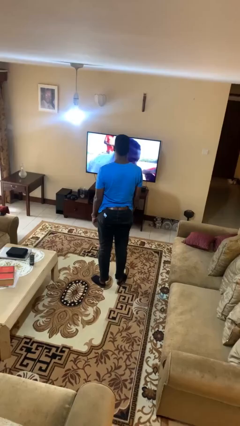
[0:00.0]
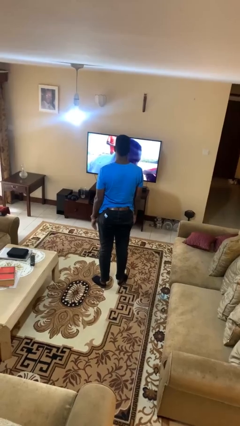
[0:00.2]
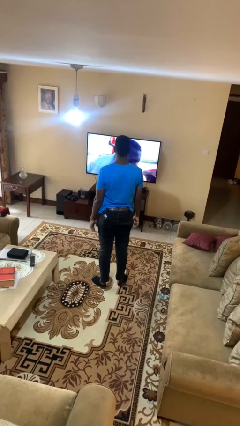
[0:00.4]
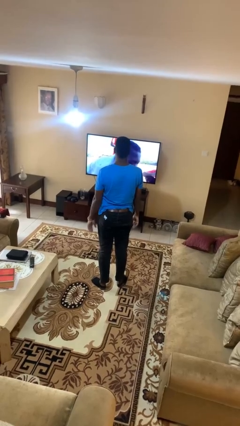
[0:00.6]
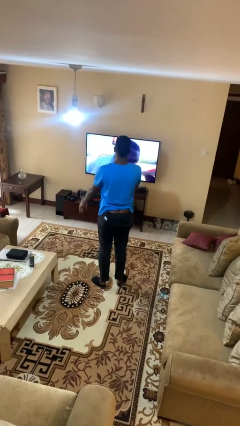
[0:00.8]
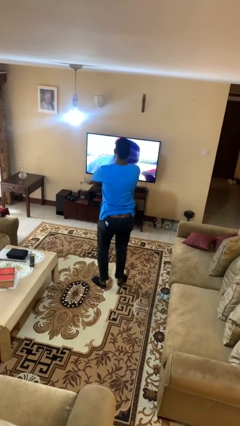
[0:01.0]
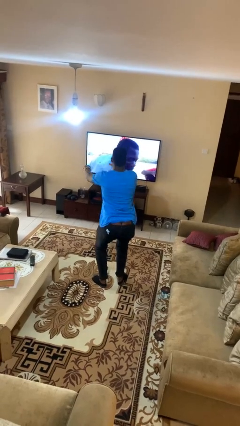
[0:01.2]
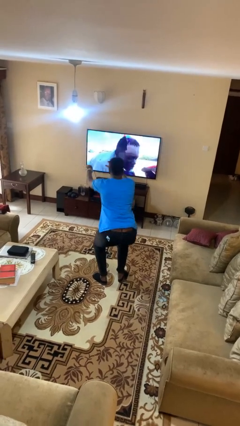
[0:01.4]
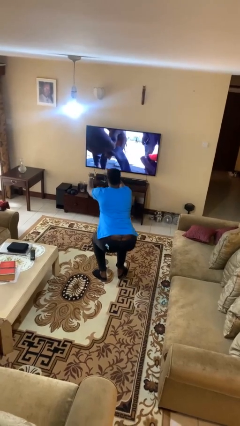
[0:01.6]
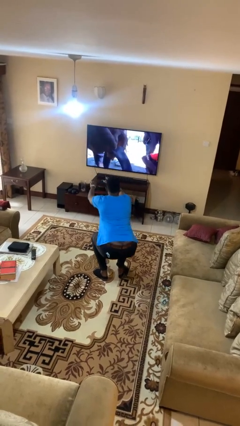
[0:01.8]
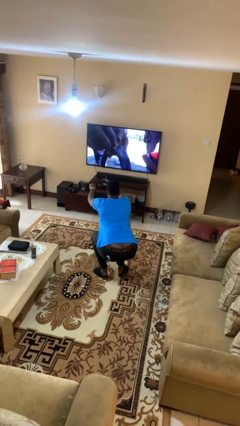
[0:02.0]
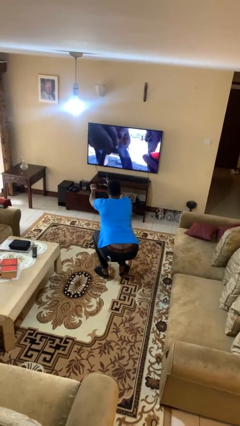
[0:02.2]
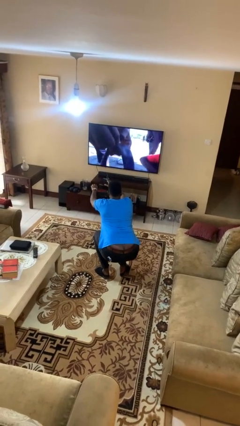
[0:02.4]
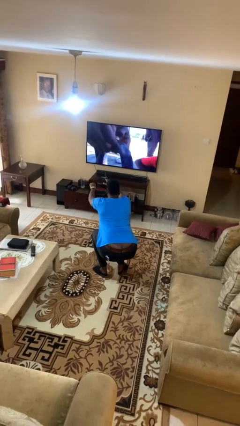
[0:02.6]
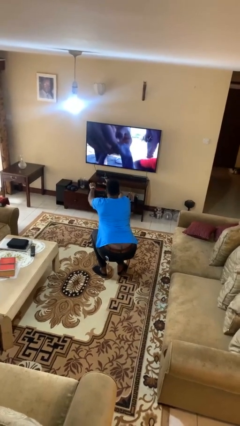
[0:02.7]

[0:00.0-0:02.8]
person squats

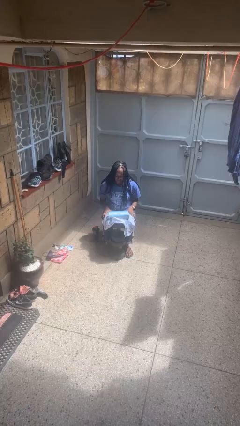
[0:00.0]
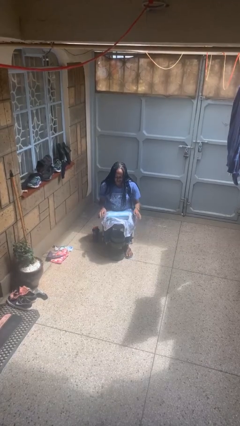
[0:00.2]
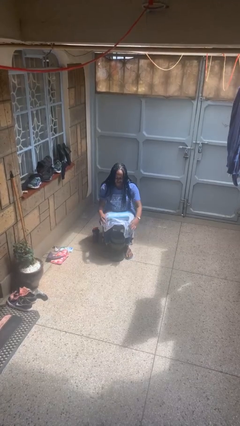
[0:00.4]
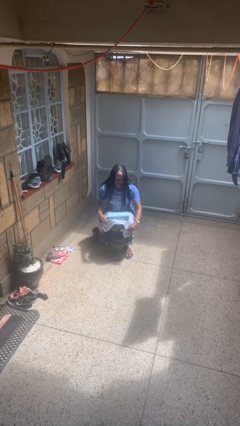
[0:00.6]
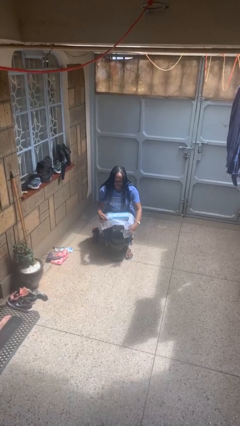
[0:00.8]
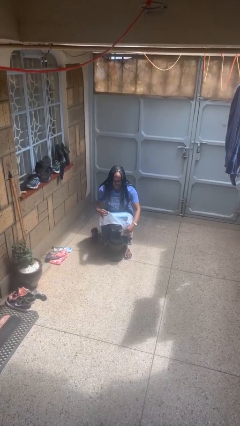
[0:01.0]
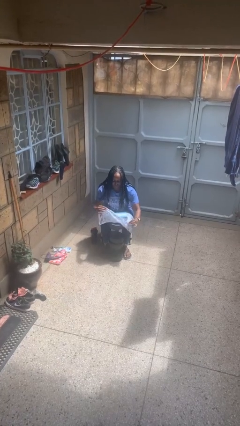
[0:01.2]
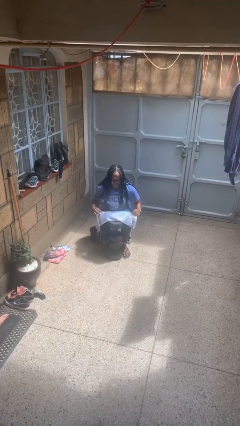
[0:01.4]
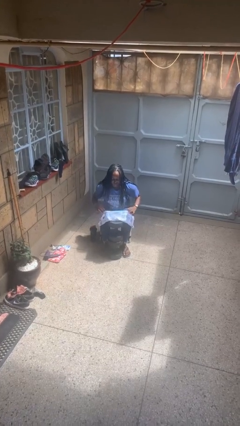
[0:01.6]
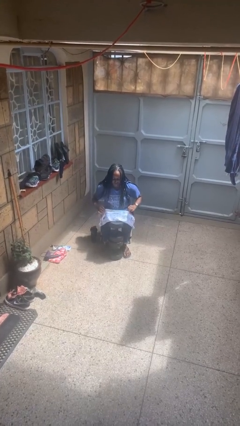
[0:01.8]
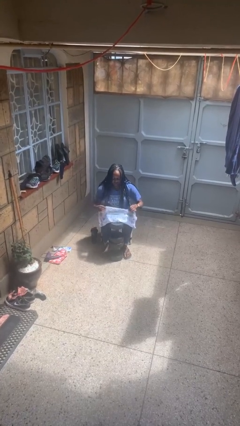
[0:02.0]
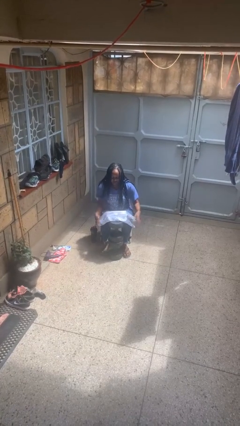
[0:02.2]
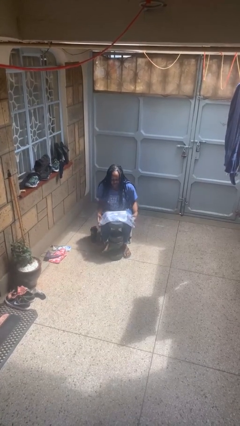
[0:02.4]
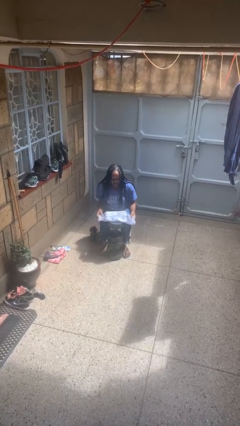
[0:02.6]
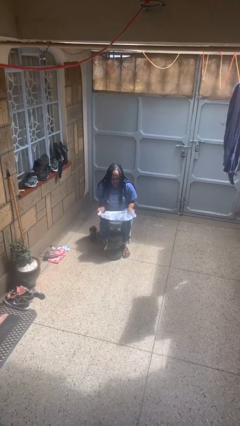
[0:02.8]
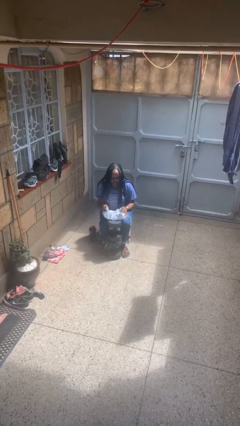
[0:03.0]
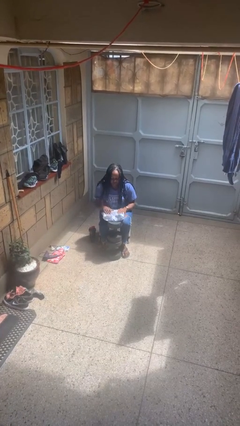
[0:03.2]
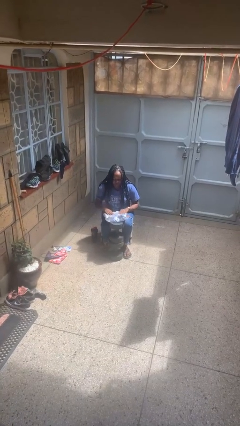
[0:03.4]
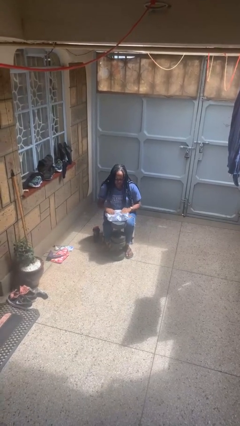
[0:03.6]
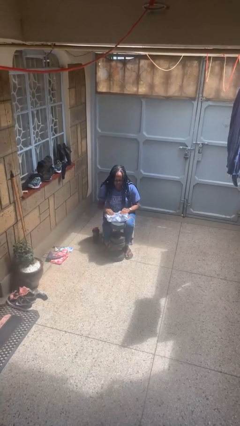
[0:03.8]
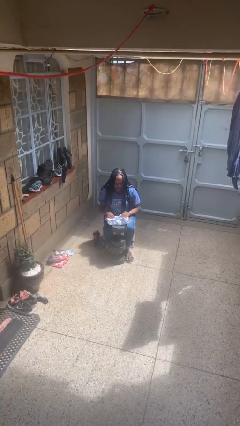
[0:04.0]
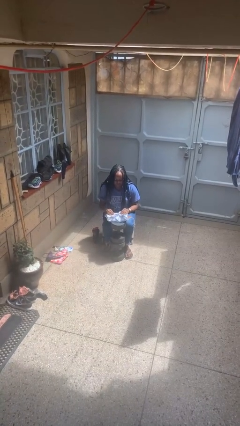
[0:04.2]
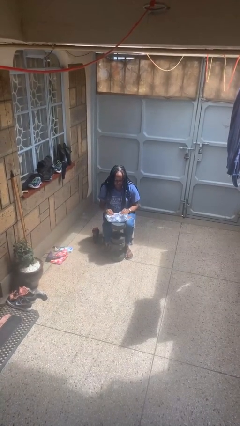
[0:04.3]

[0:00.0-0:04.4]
person wraps box

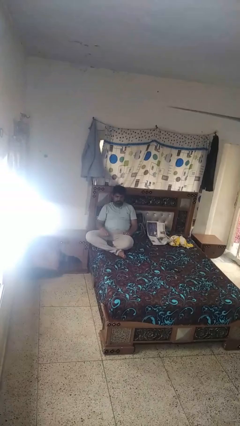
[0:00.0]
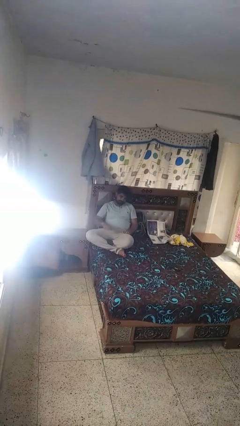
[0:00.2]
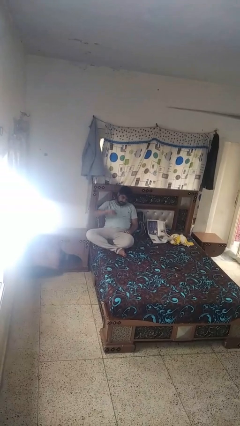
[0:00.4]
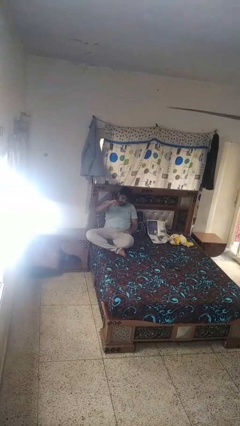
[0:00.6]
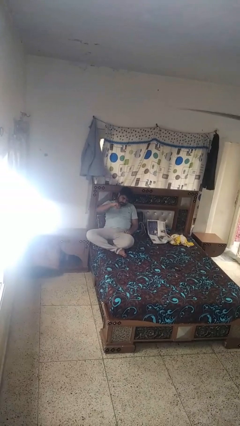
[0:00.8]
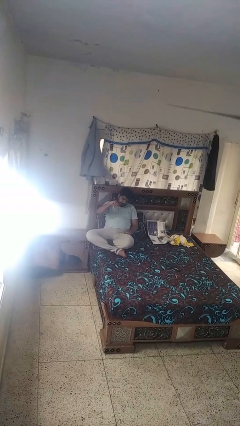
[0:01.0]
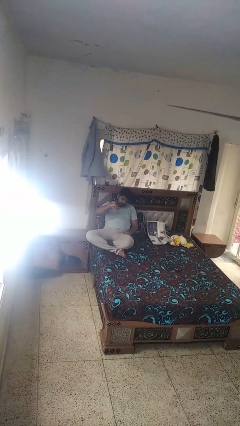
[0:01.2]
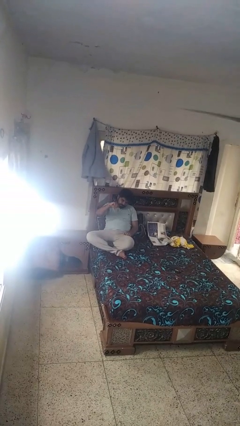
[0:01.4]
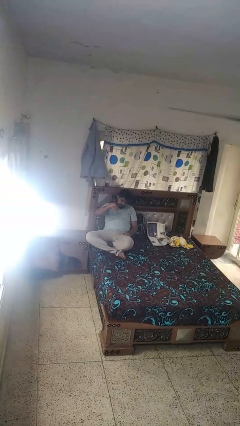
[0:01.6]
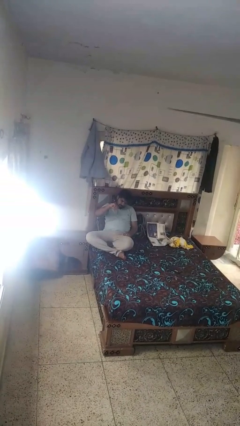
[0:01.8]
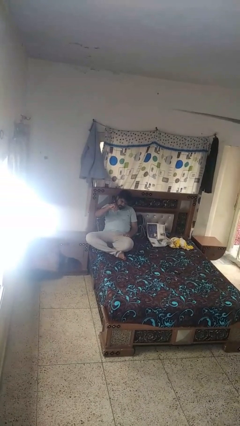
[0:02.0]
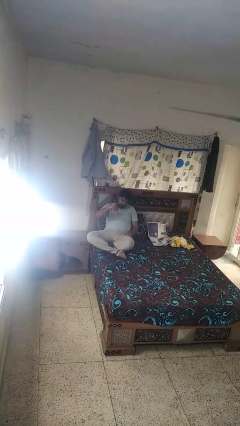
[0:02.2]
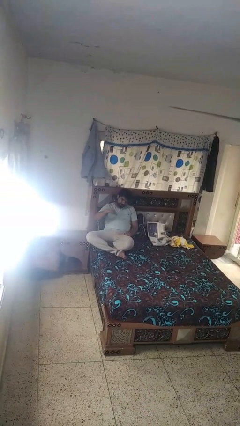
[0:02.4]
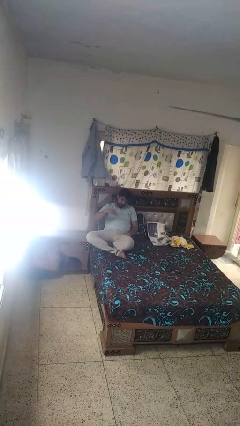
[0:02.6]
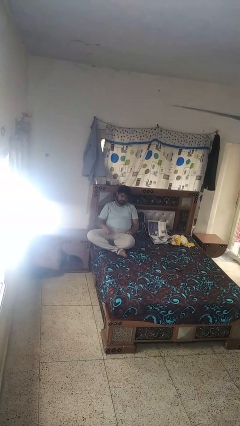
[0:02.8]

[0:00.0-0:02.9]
person gestures thumbs down

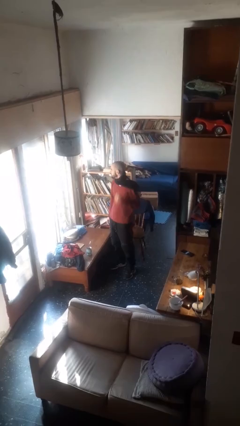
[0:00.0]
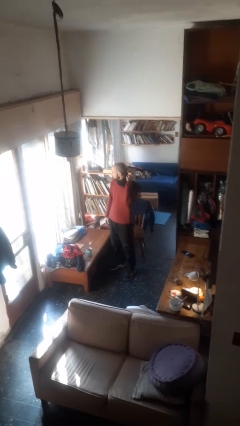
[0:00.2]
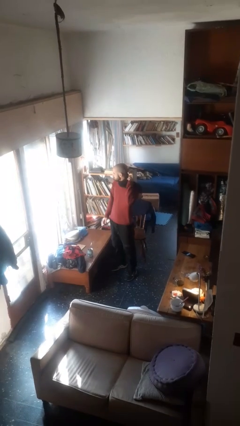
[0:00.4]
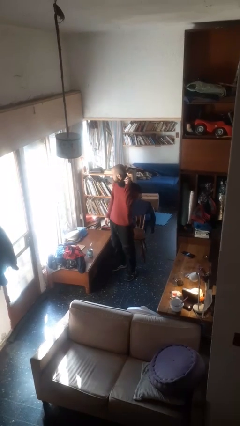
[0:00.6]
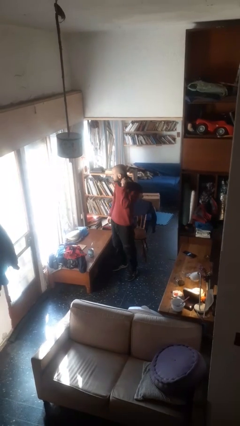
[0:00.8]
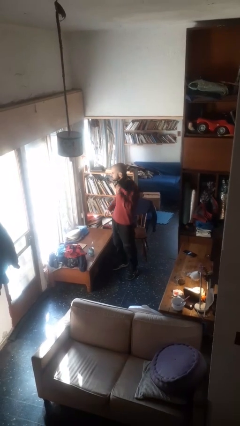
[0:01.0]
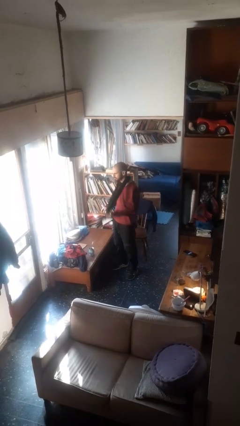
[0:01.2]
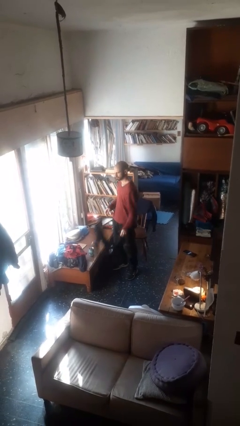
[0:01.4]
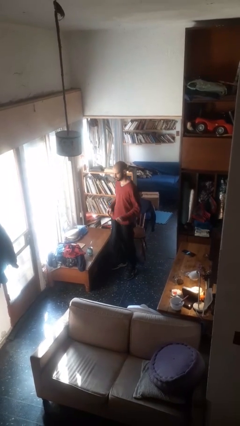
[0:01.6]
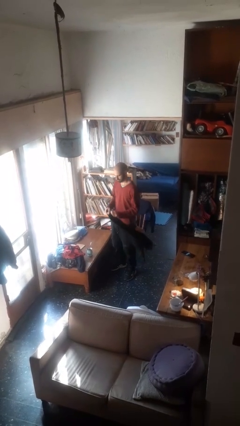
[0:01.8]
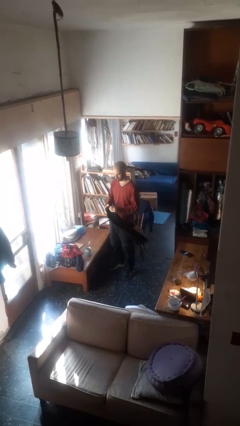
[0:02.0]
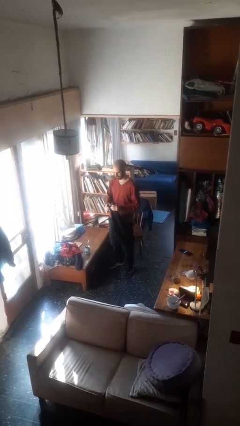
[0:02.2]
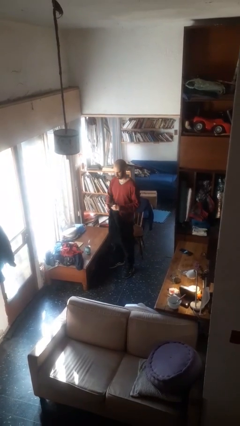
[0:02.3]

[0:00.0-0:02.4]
person takes off scarf

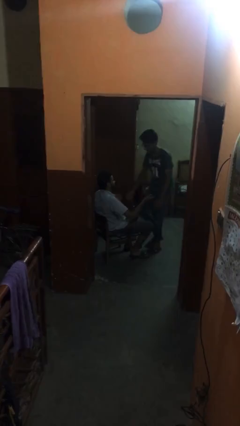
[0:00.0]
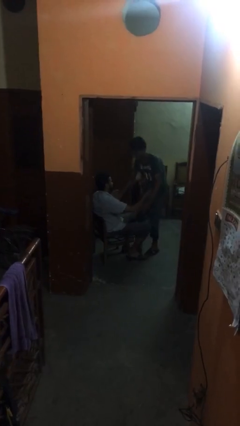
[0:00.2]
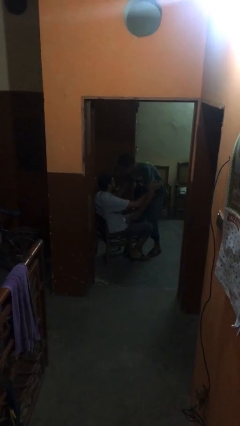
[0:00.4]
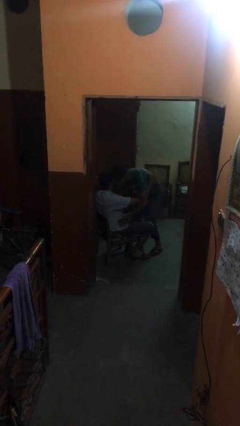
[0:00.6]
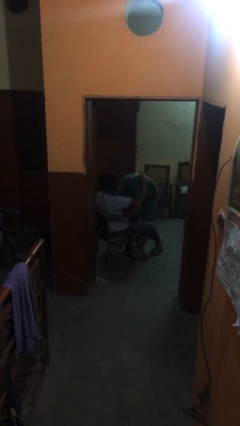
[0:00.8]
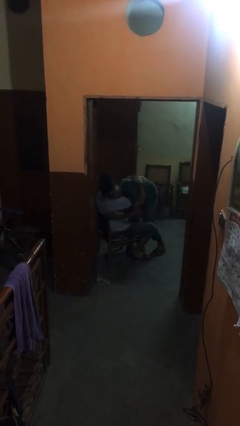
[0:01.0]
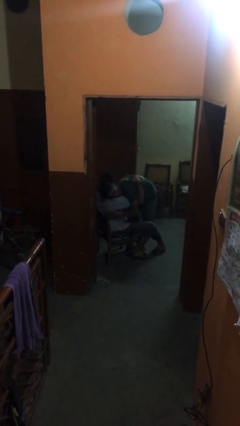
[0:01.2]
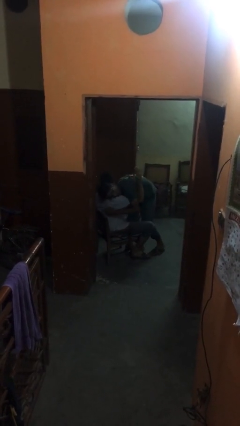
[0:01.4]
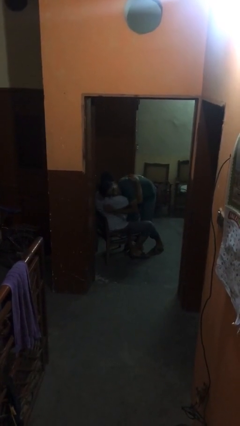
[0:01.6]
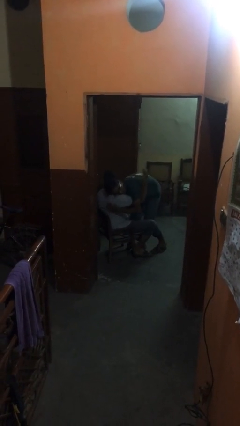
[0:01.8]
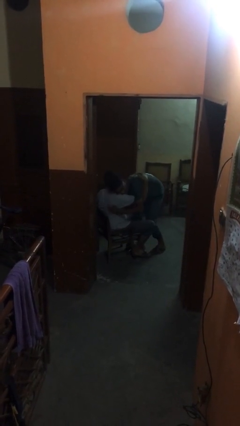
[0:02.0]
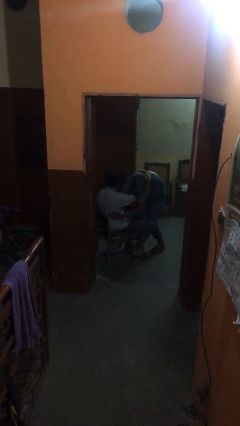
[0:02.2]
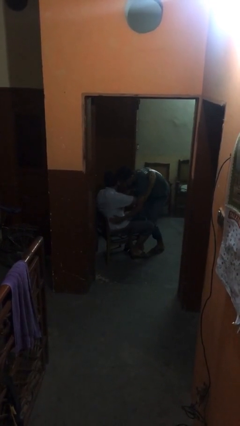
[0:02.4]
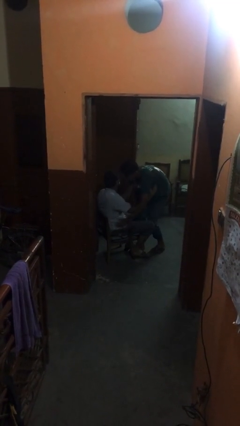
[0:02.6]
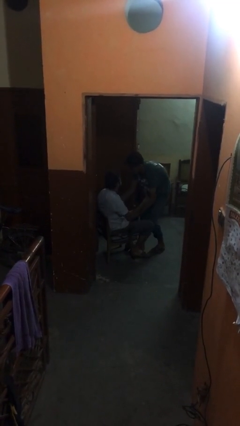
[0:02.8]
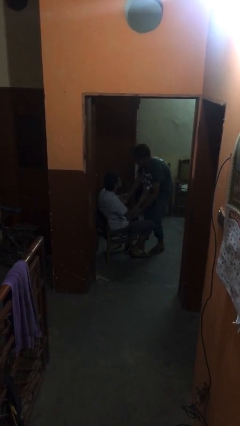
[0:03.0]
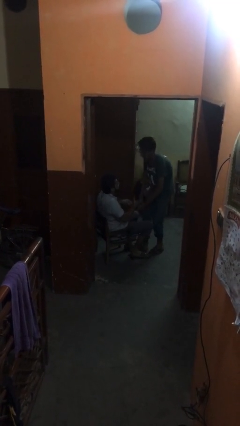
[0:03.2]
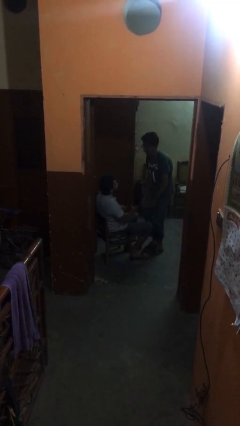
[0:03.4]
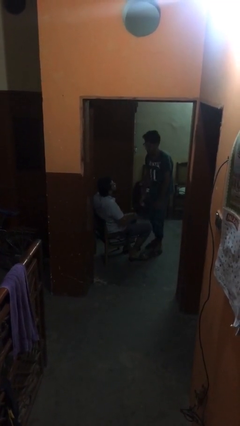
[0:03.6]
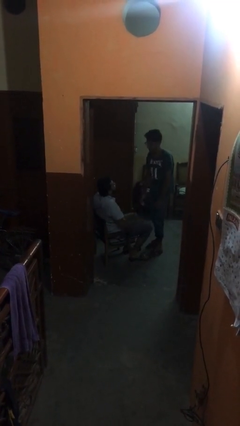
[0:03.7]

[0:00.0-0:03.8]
person embraces person

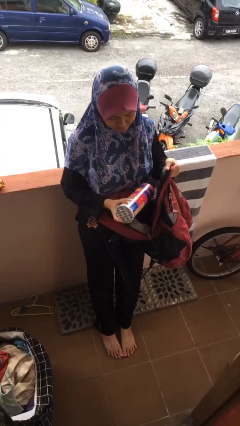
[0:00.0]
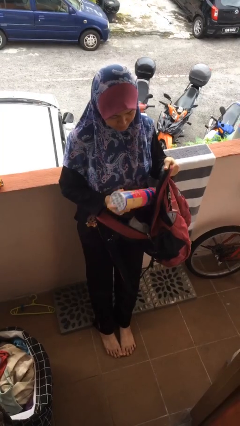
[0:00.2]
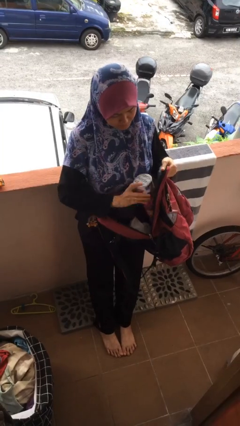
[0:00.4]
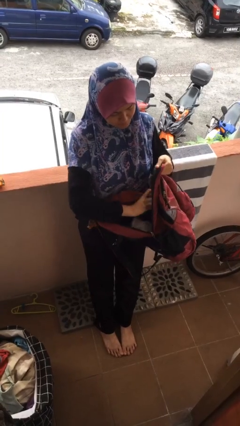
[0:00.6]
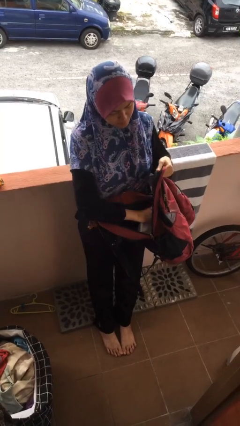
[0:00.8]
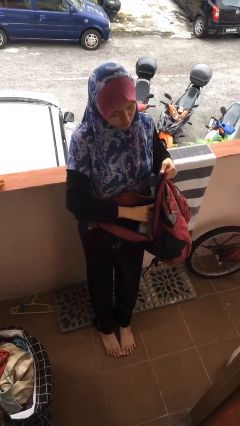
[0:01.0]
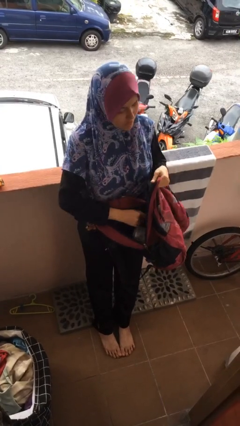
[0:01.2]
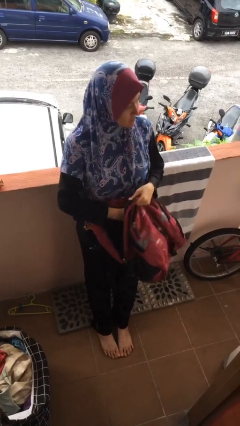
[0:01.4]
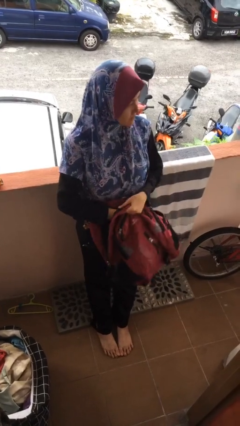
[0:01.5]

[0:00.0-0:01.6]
person puts object into backpack
